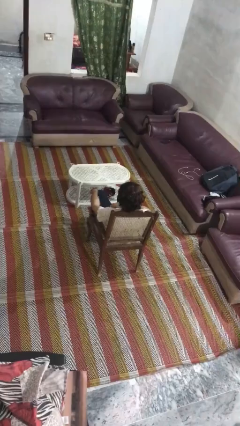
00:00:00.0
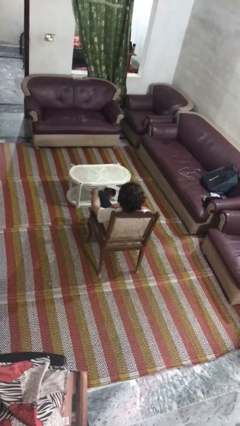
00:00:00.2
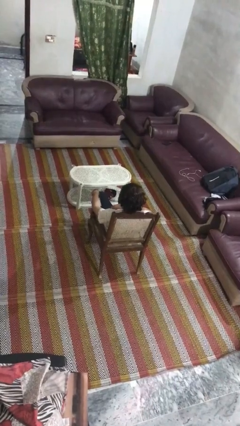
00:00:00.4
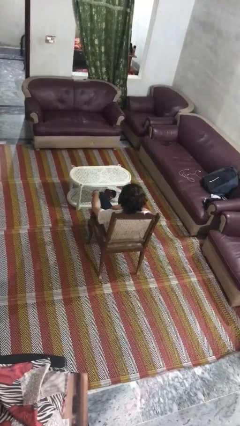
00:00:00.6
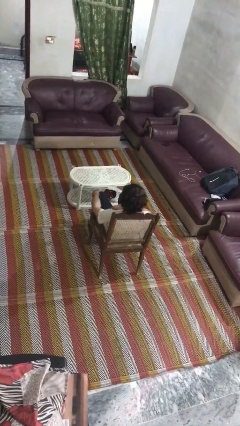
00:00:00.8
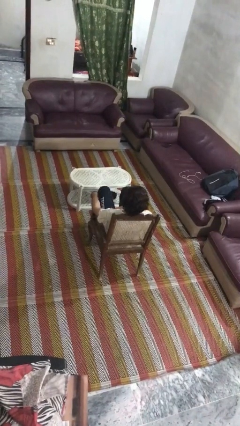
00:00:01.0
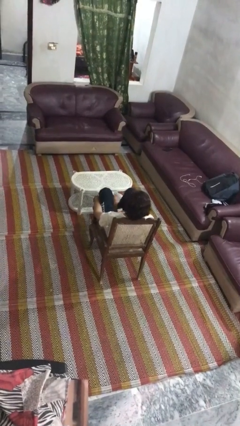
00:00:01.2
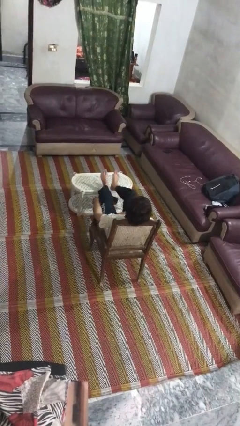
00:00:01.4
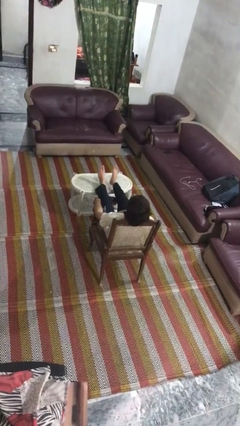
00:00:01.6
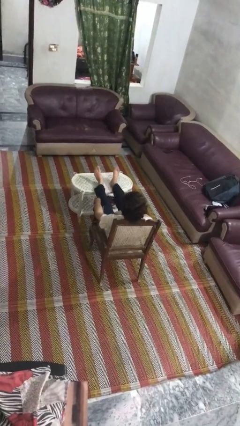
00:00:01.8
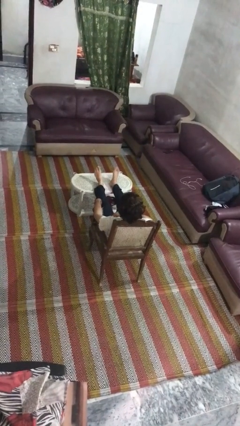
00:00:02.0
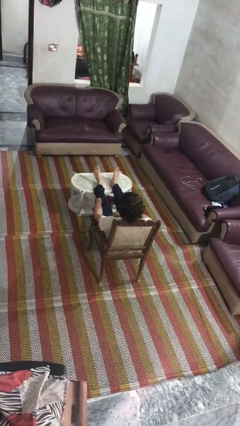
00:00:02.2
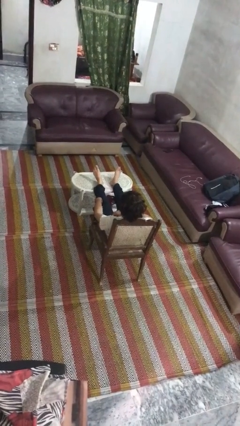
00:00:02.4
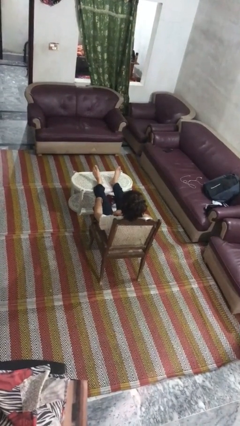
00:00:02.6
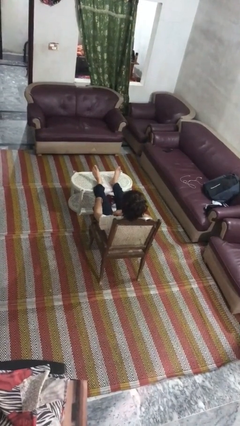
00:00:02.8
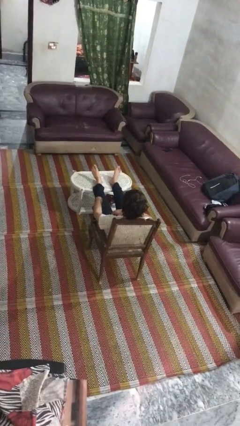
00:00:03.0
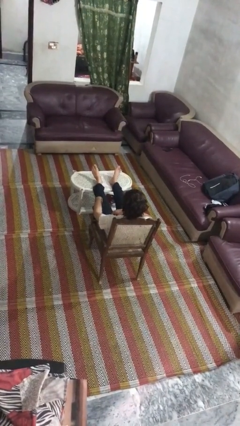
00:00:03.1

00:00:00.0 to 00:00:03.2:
person puts feet up

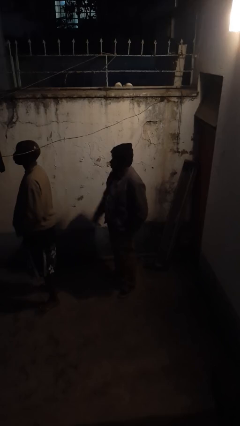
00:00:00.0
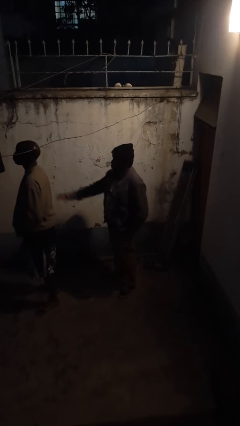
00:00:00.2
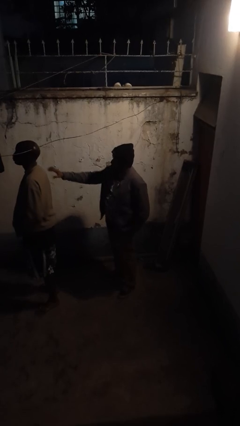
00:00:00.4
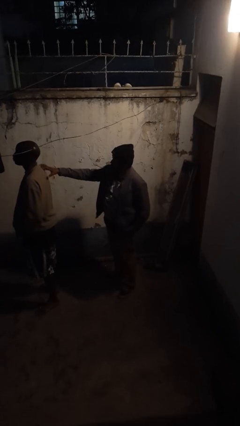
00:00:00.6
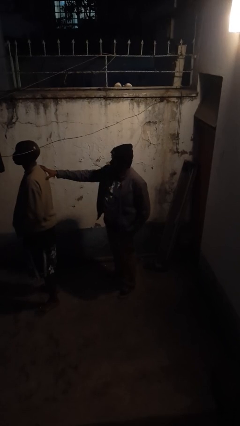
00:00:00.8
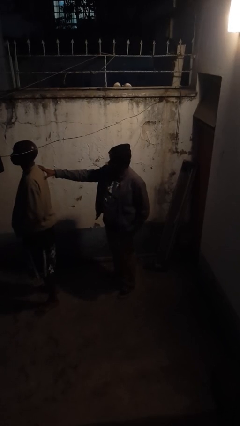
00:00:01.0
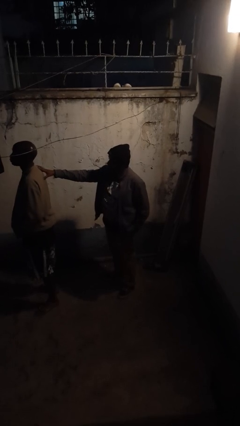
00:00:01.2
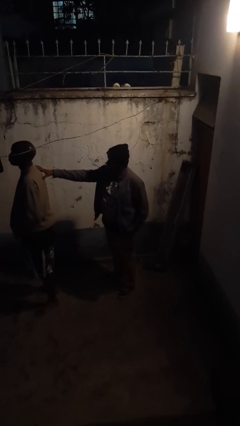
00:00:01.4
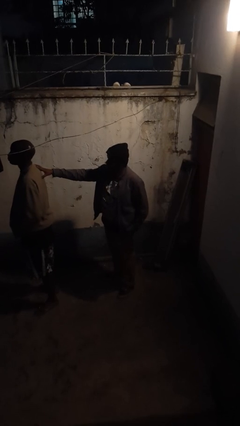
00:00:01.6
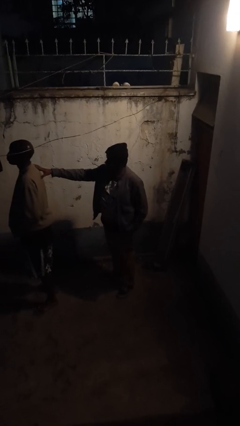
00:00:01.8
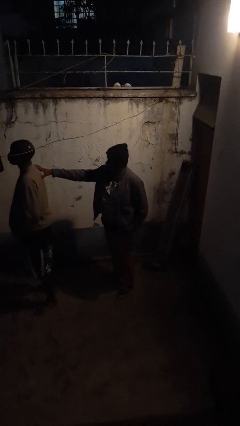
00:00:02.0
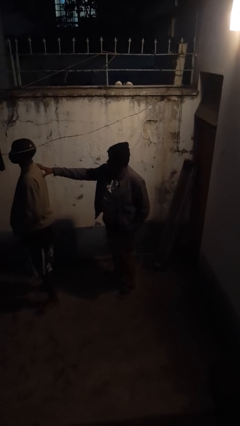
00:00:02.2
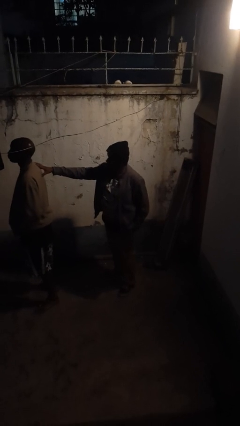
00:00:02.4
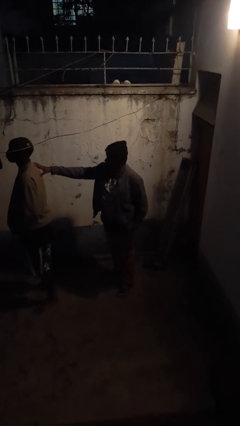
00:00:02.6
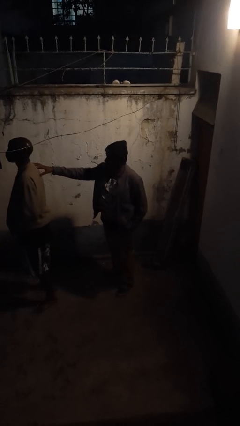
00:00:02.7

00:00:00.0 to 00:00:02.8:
person touches back of person

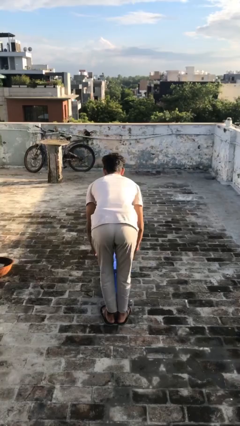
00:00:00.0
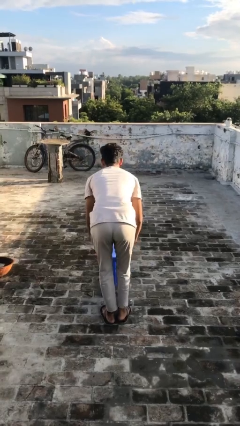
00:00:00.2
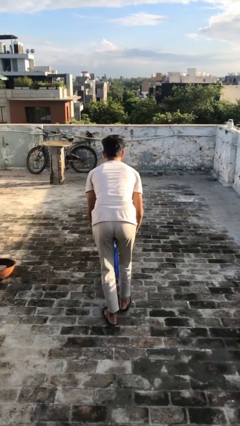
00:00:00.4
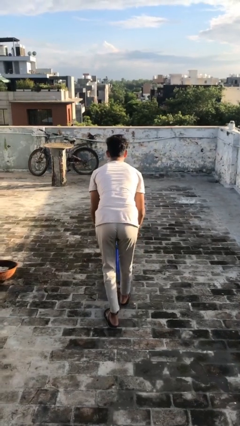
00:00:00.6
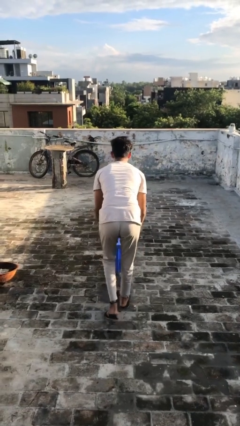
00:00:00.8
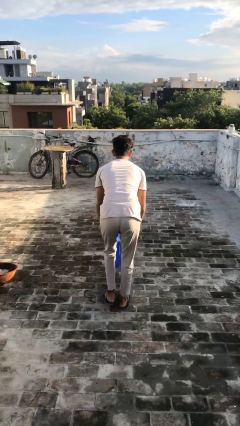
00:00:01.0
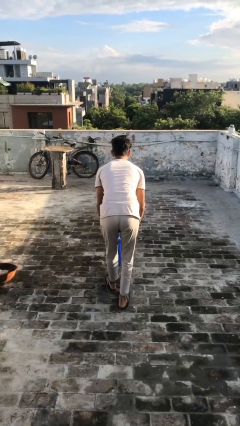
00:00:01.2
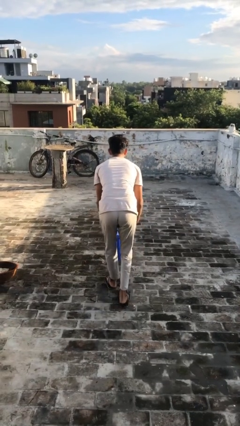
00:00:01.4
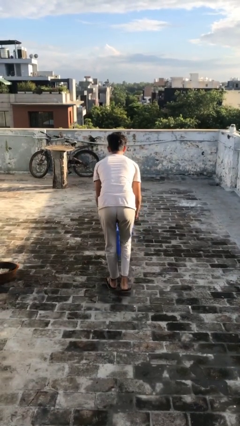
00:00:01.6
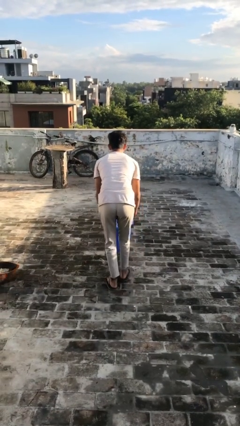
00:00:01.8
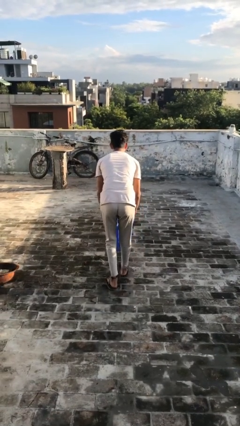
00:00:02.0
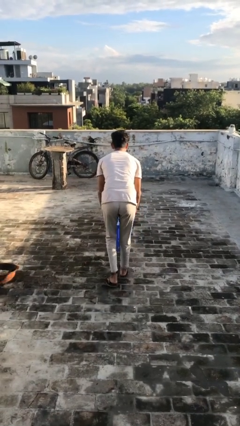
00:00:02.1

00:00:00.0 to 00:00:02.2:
person pushes wheeled trashcan

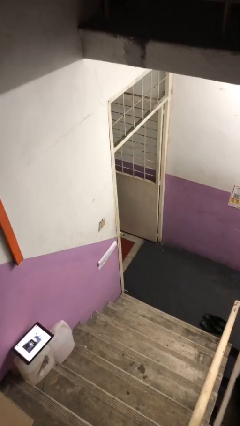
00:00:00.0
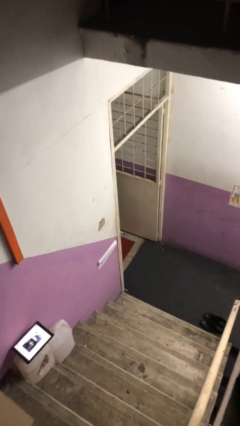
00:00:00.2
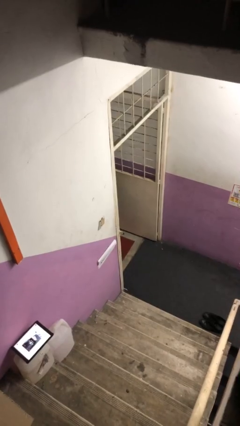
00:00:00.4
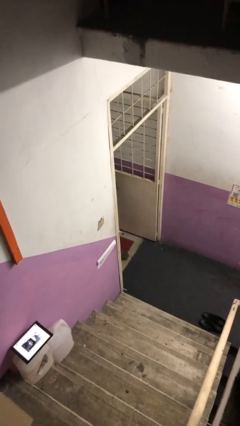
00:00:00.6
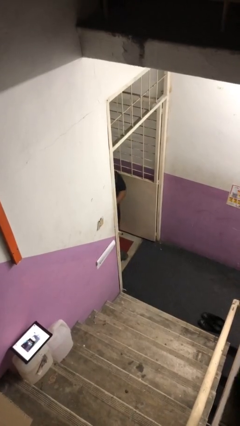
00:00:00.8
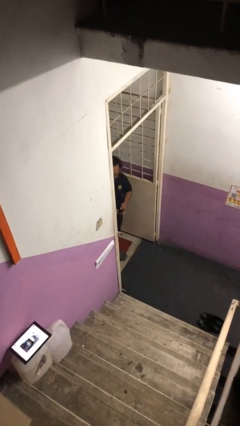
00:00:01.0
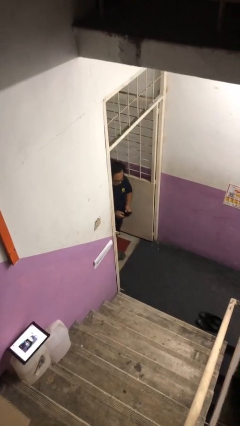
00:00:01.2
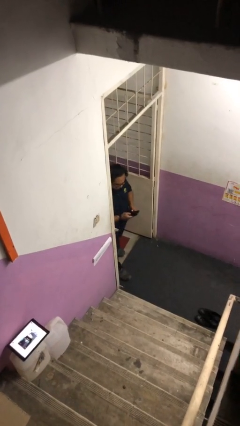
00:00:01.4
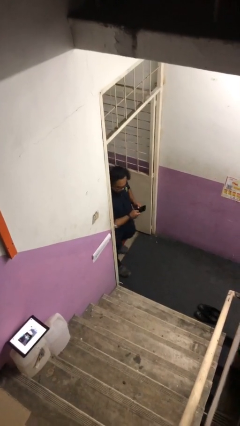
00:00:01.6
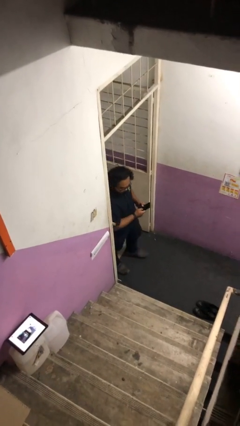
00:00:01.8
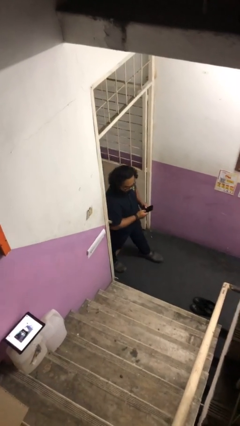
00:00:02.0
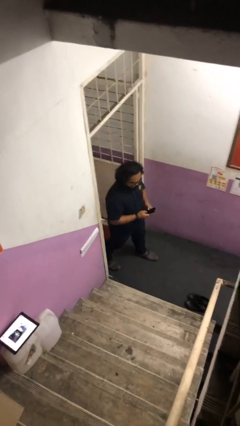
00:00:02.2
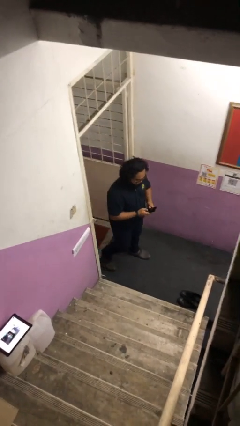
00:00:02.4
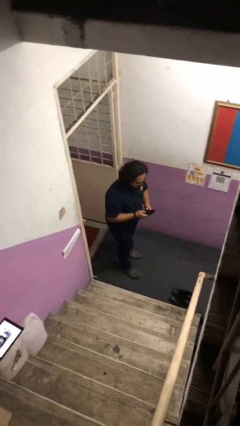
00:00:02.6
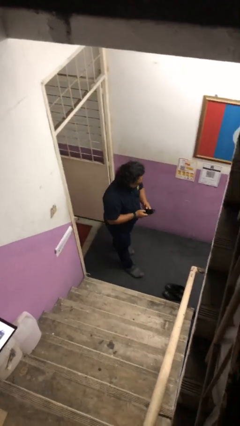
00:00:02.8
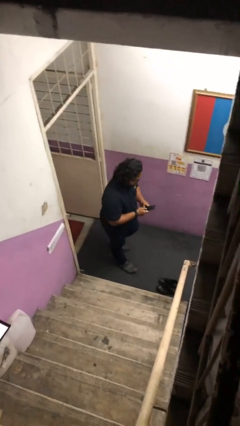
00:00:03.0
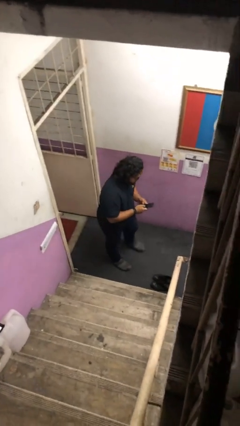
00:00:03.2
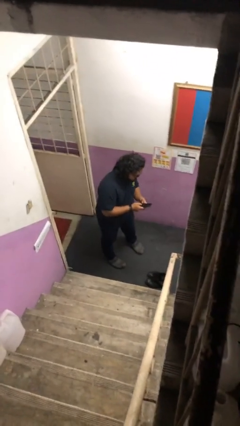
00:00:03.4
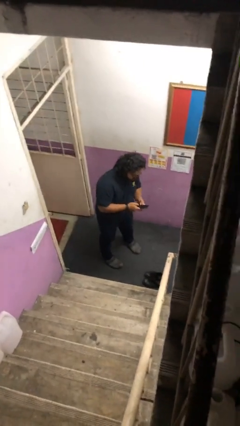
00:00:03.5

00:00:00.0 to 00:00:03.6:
person enters scene through structure

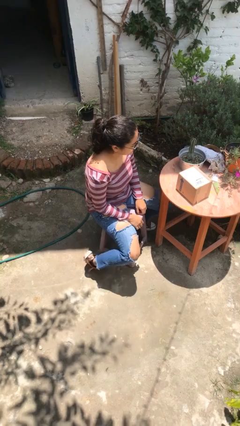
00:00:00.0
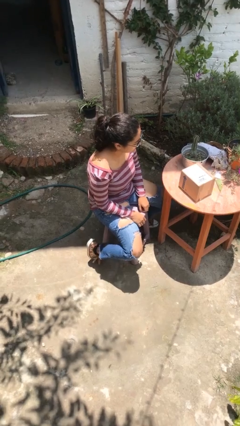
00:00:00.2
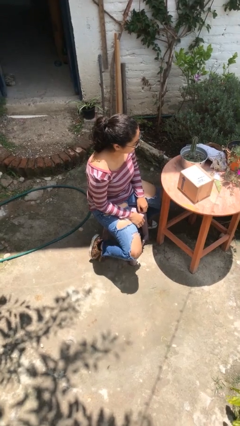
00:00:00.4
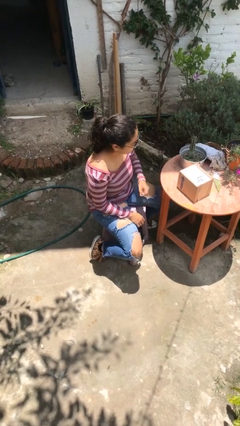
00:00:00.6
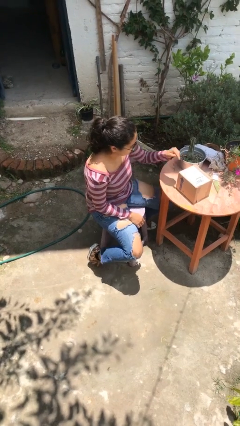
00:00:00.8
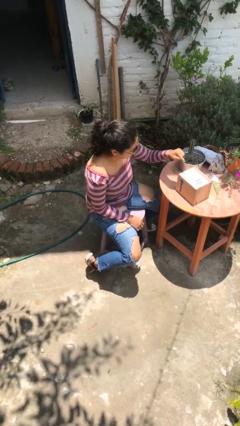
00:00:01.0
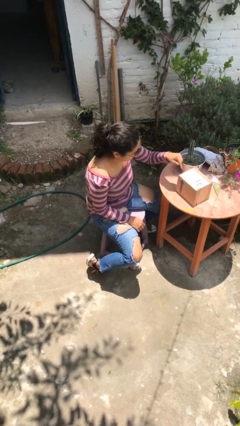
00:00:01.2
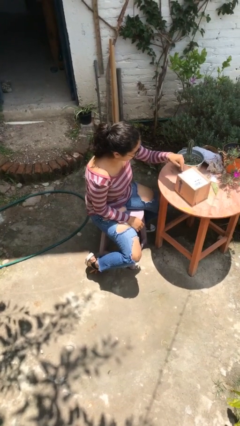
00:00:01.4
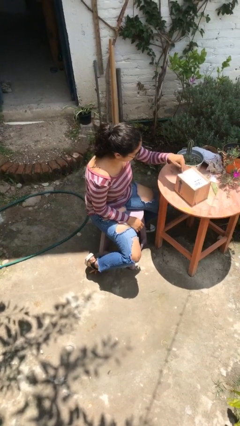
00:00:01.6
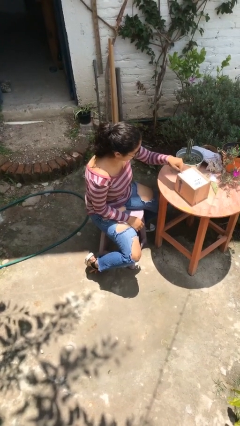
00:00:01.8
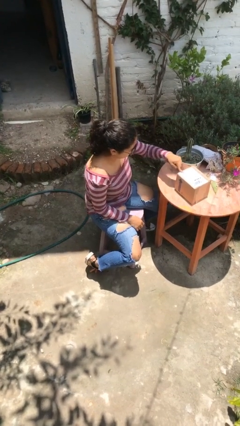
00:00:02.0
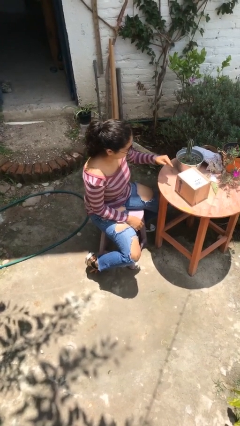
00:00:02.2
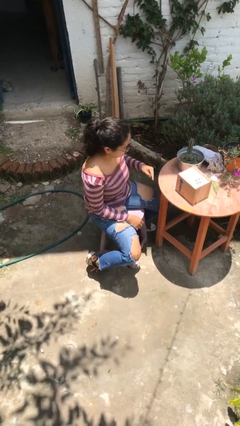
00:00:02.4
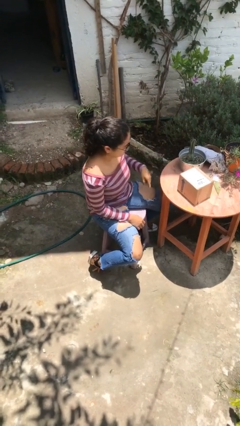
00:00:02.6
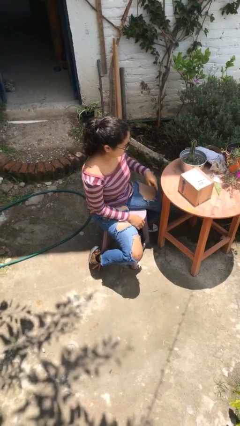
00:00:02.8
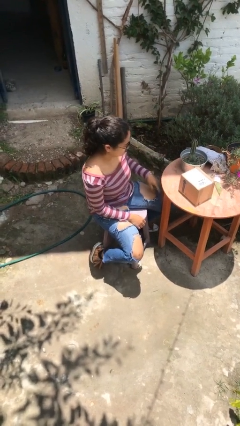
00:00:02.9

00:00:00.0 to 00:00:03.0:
person swats bug

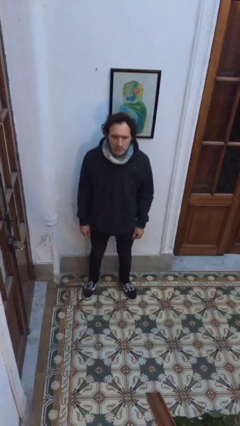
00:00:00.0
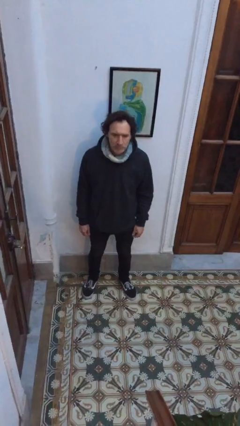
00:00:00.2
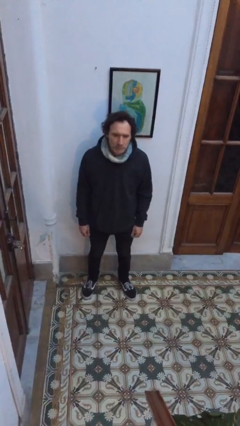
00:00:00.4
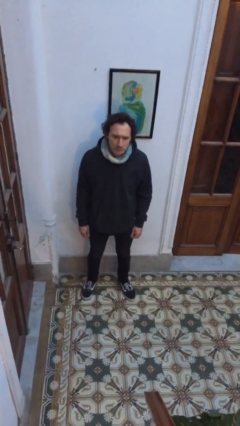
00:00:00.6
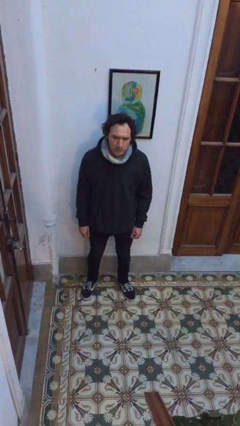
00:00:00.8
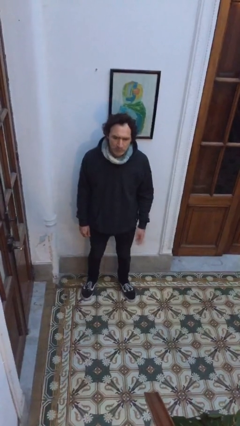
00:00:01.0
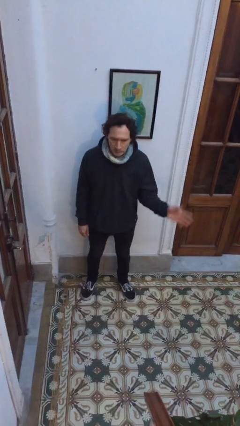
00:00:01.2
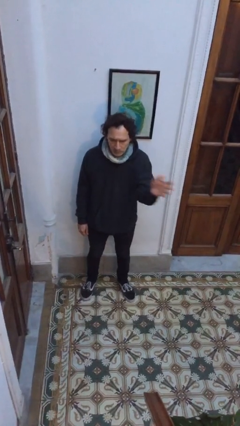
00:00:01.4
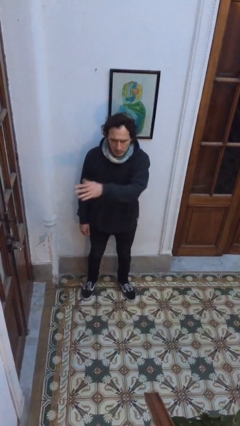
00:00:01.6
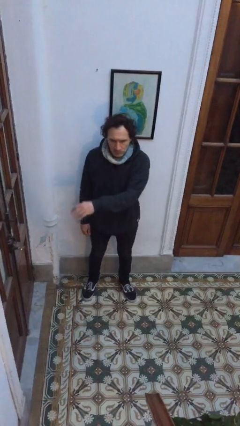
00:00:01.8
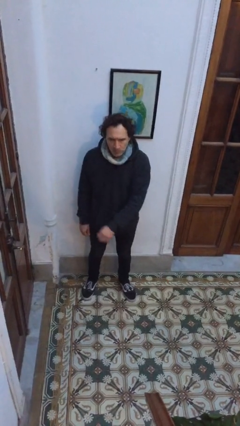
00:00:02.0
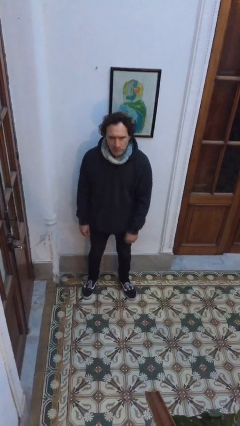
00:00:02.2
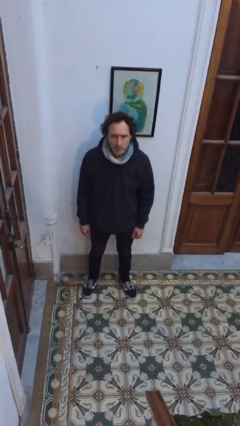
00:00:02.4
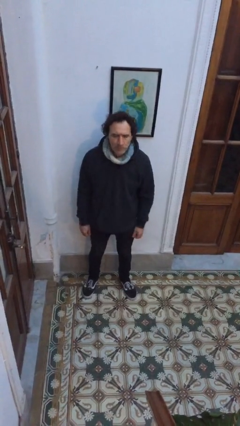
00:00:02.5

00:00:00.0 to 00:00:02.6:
person gestures swipe right

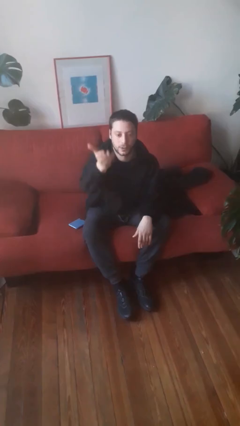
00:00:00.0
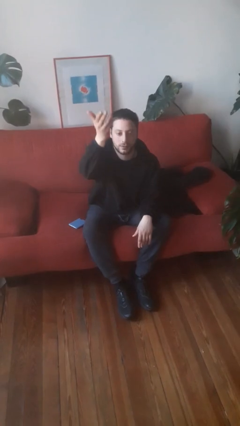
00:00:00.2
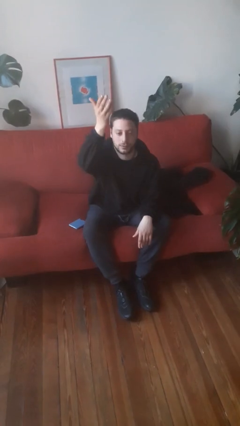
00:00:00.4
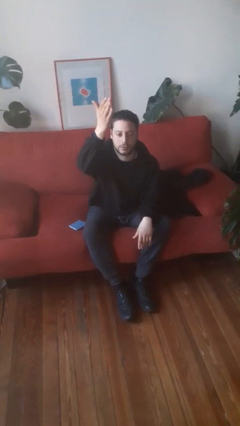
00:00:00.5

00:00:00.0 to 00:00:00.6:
person gestures swipe up
